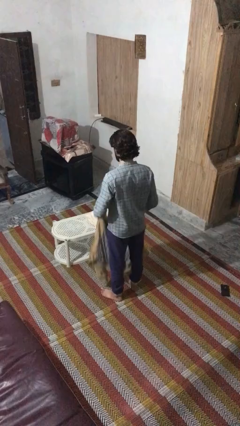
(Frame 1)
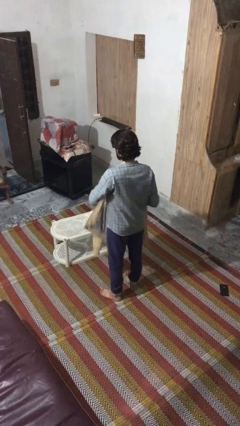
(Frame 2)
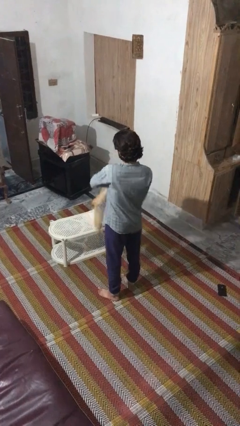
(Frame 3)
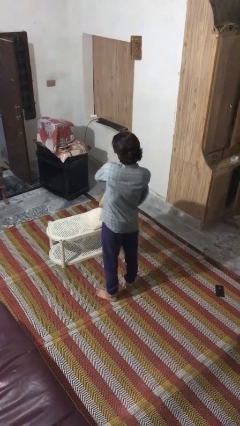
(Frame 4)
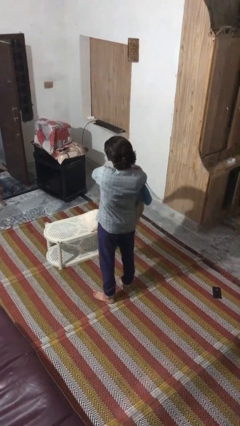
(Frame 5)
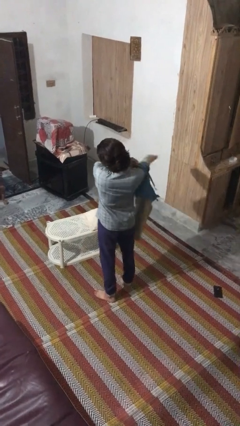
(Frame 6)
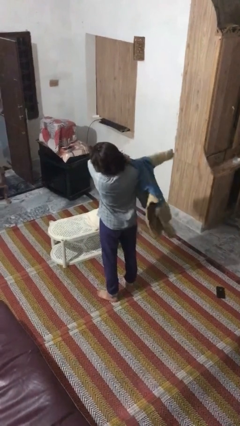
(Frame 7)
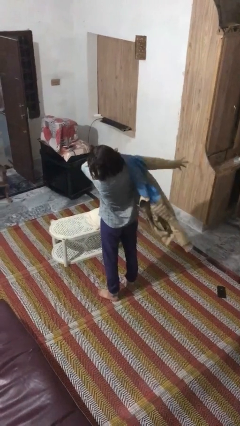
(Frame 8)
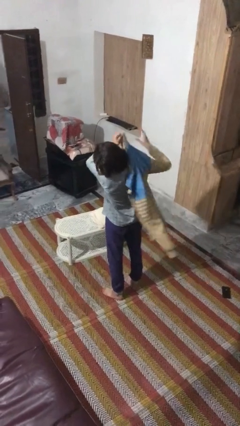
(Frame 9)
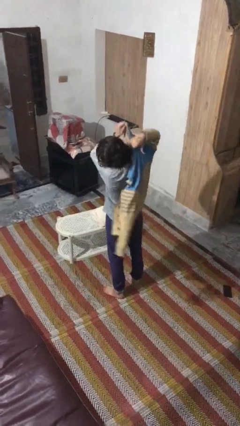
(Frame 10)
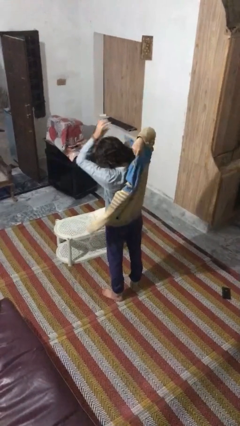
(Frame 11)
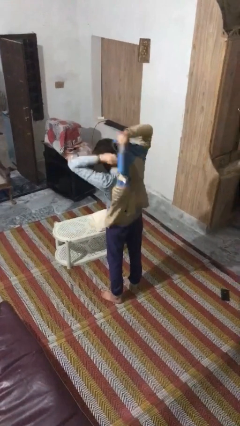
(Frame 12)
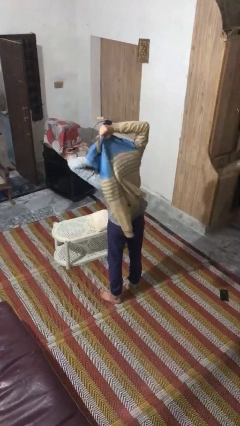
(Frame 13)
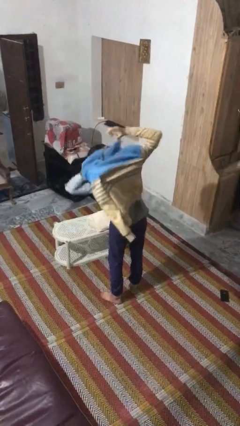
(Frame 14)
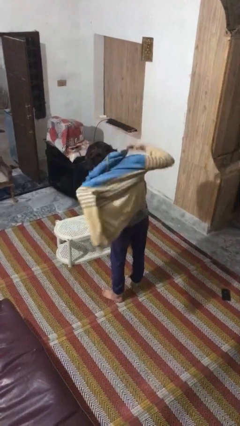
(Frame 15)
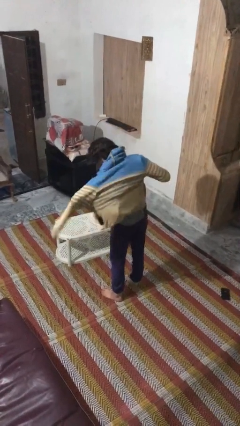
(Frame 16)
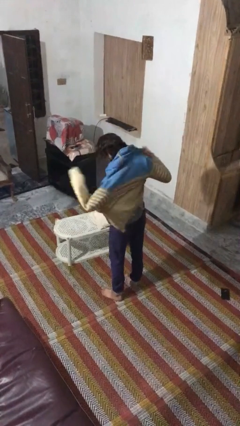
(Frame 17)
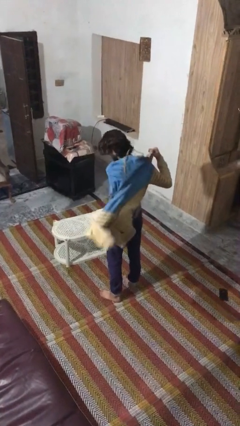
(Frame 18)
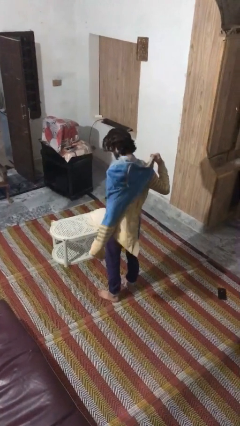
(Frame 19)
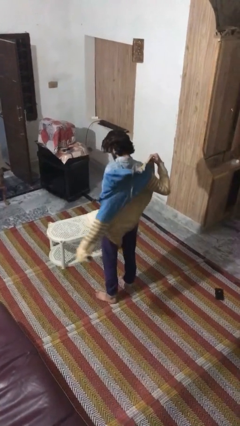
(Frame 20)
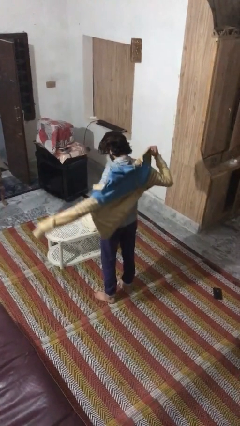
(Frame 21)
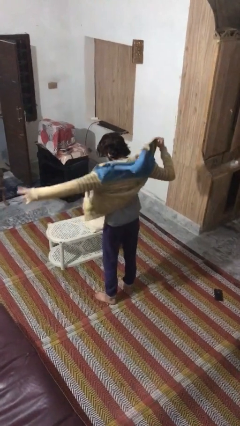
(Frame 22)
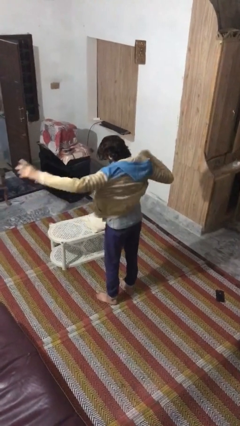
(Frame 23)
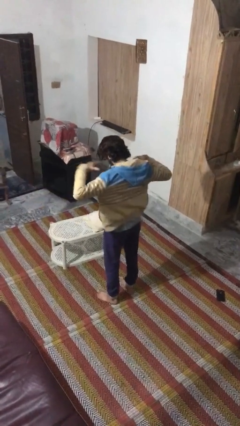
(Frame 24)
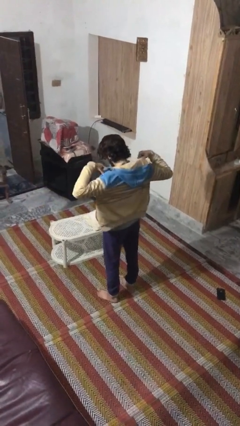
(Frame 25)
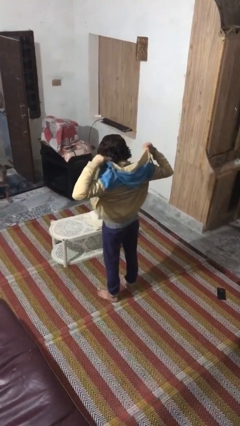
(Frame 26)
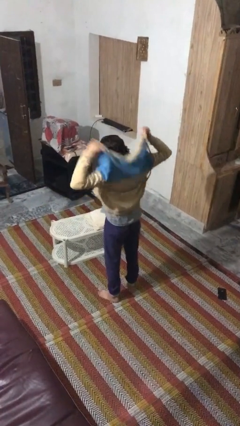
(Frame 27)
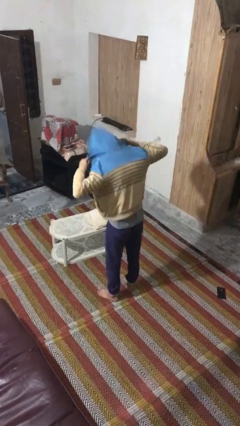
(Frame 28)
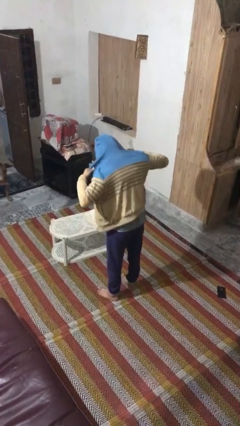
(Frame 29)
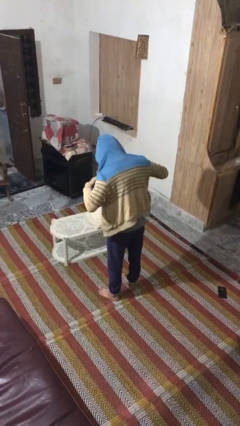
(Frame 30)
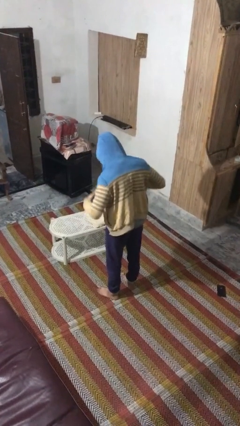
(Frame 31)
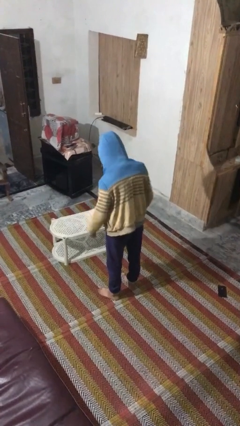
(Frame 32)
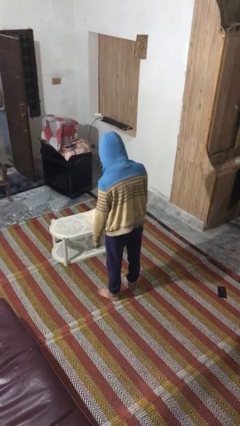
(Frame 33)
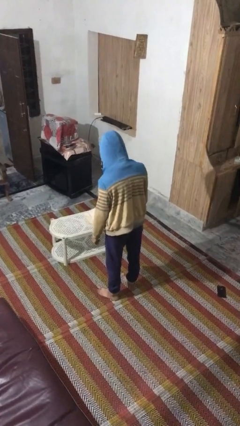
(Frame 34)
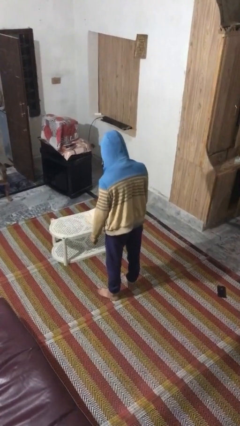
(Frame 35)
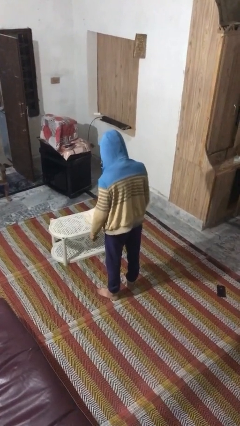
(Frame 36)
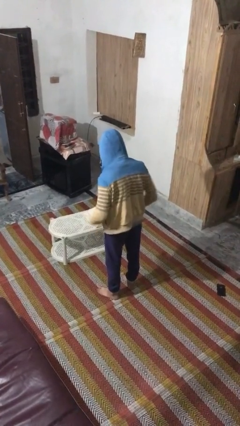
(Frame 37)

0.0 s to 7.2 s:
person puts on hoodie

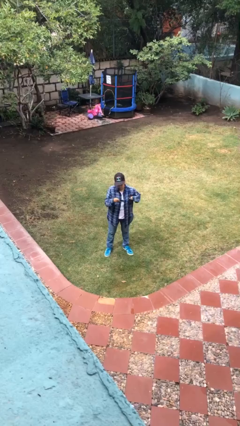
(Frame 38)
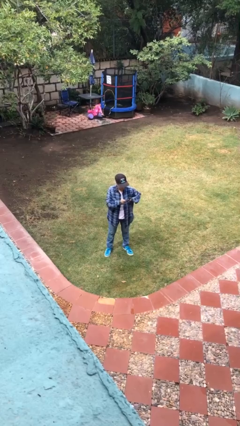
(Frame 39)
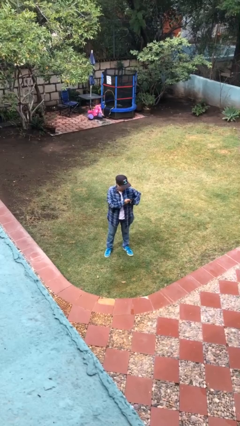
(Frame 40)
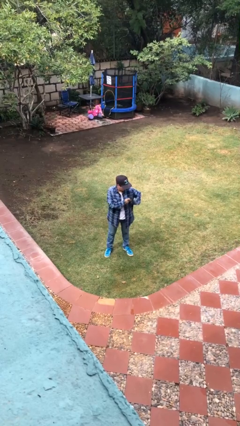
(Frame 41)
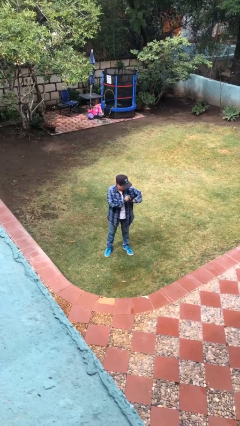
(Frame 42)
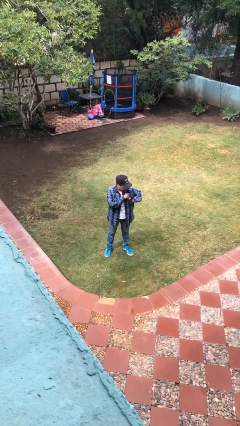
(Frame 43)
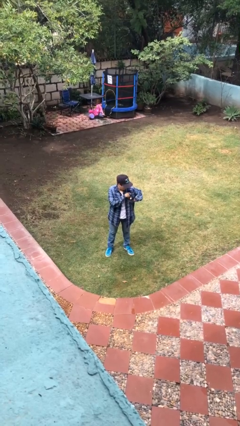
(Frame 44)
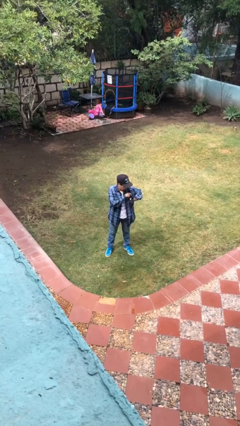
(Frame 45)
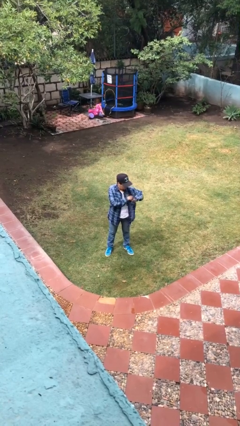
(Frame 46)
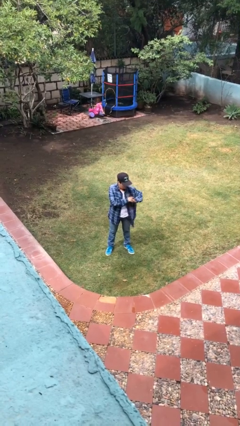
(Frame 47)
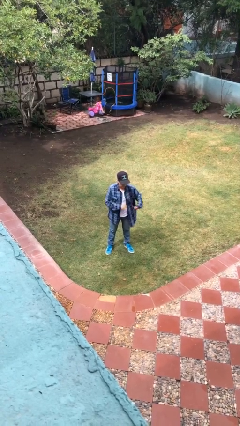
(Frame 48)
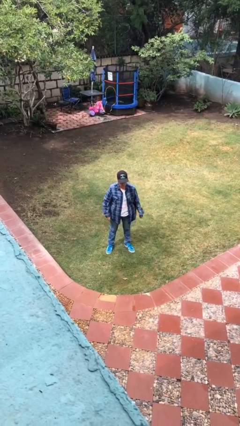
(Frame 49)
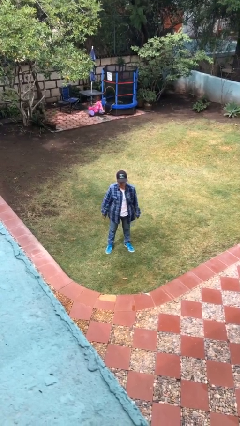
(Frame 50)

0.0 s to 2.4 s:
person puts phone into pocket

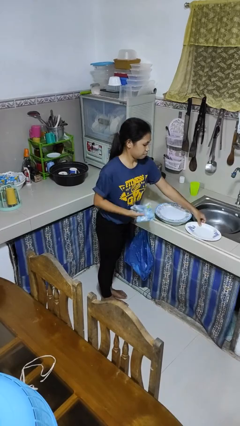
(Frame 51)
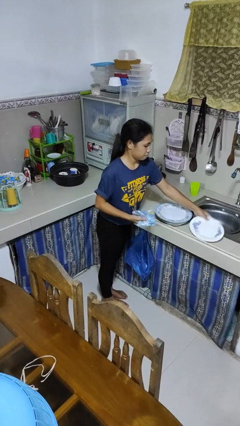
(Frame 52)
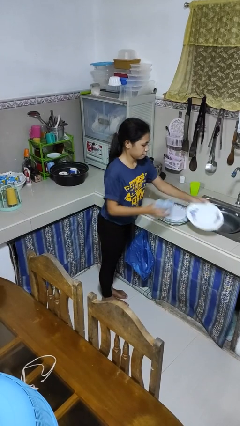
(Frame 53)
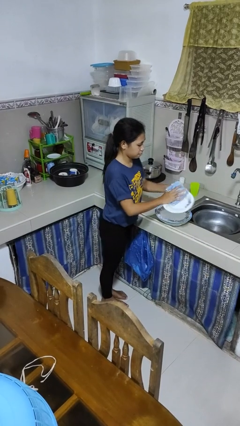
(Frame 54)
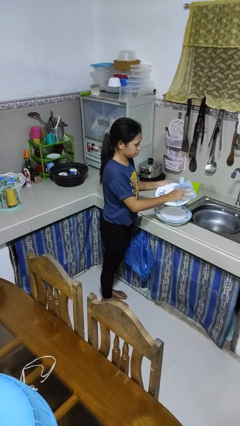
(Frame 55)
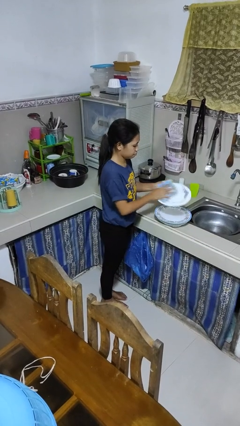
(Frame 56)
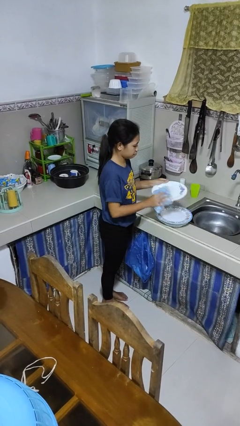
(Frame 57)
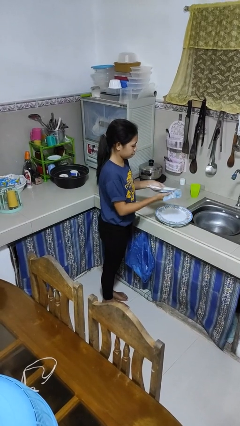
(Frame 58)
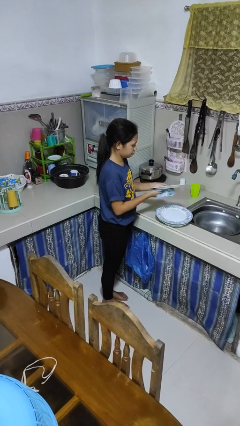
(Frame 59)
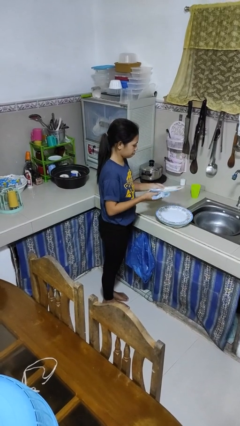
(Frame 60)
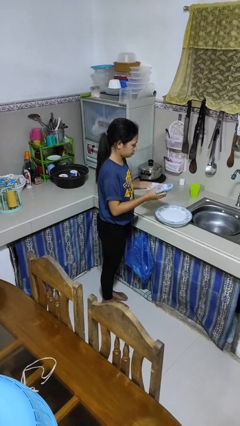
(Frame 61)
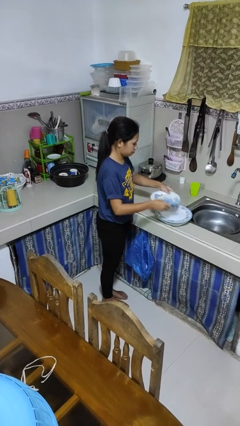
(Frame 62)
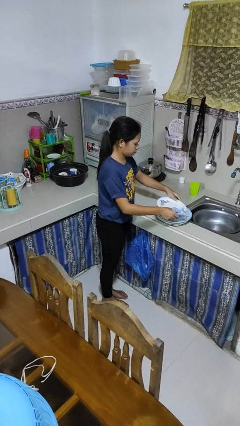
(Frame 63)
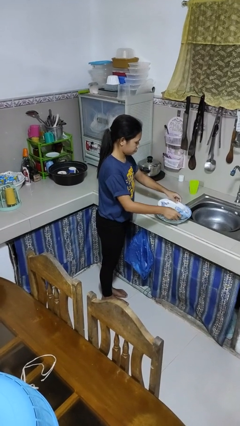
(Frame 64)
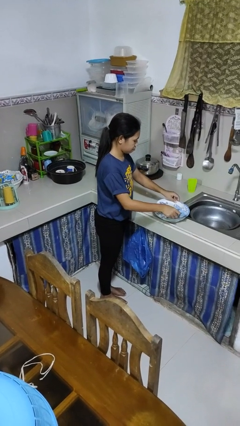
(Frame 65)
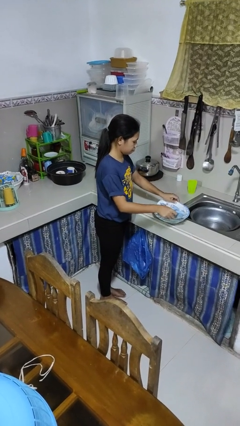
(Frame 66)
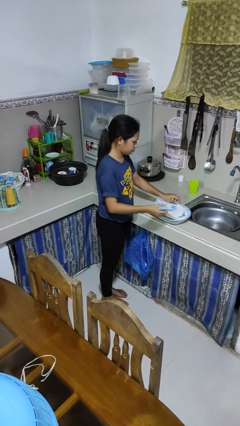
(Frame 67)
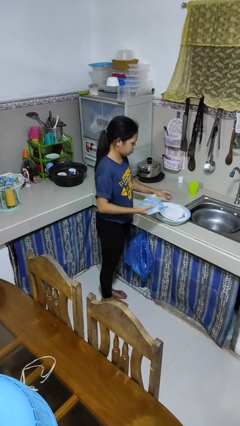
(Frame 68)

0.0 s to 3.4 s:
person dries dish

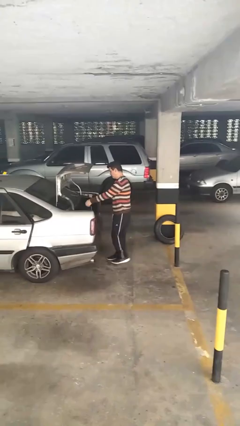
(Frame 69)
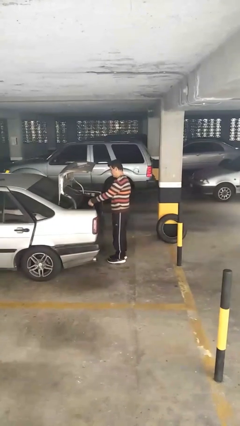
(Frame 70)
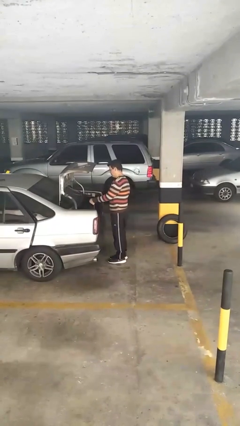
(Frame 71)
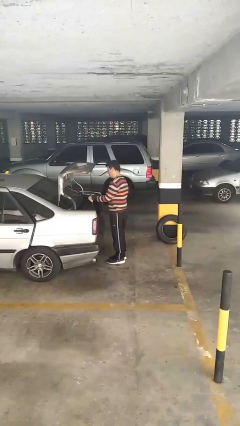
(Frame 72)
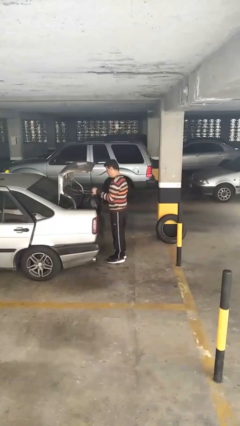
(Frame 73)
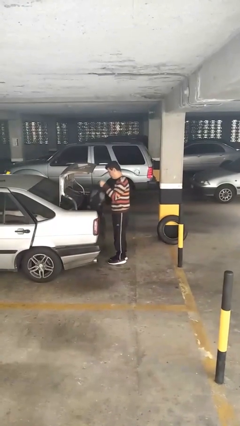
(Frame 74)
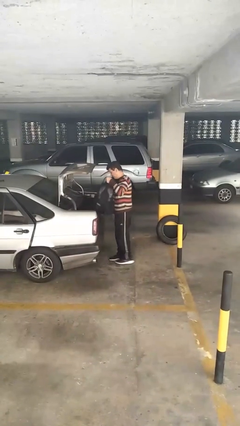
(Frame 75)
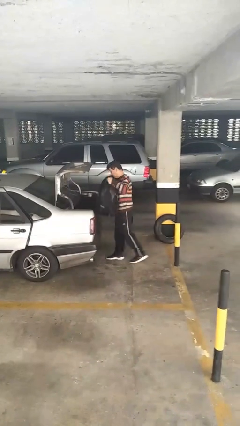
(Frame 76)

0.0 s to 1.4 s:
person unloads car

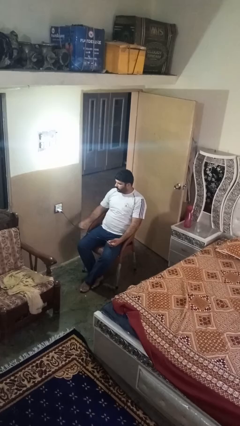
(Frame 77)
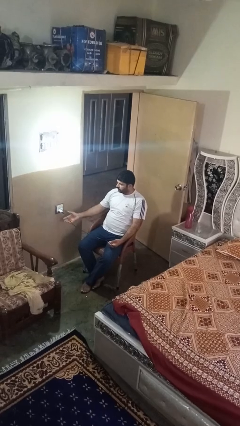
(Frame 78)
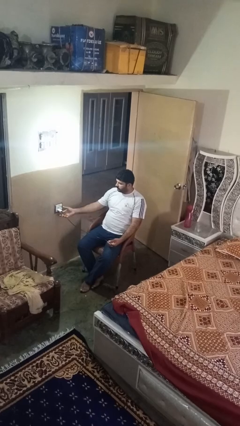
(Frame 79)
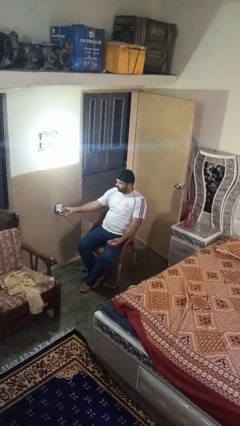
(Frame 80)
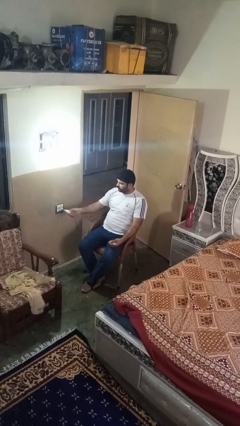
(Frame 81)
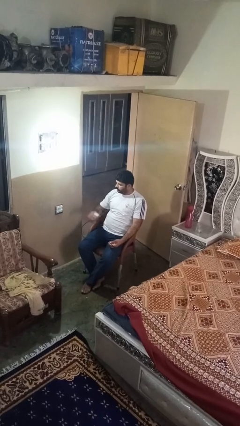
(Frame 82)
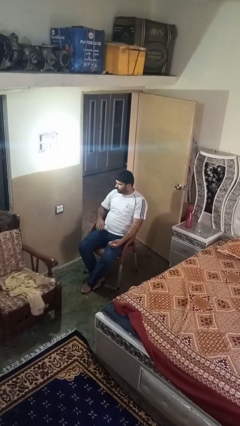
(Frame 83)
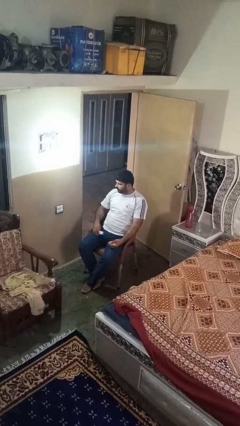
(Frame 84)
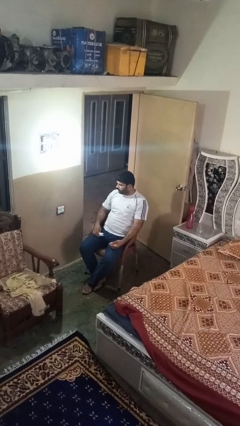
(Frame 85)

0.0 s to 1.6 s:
person unplugs from electrical socket

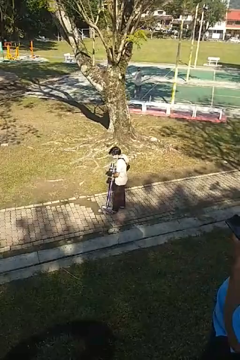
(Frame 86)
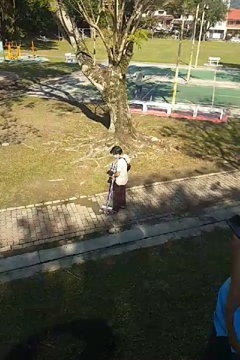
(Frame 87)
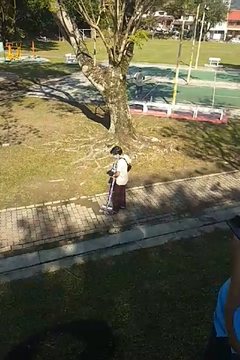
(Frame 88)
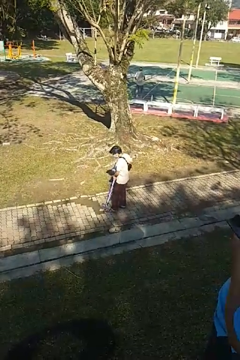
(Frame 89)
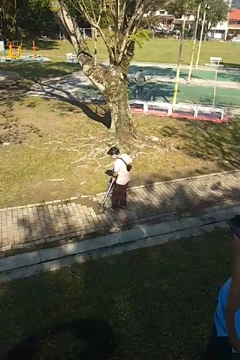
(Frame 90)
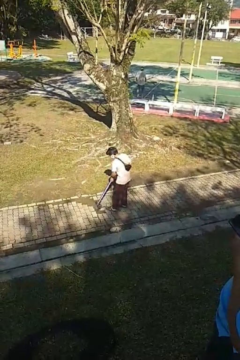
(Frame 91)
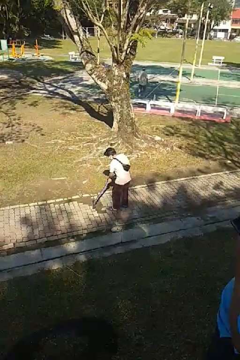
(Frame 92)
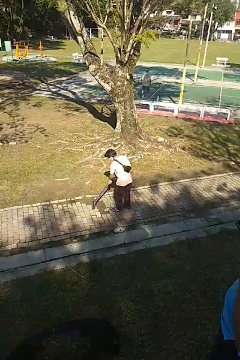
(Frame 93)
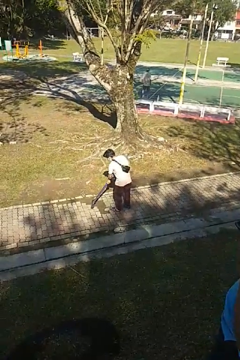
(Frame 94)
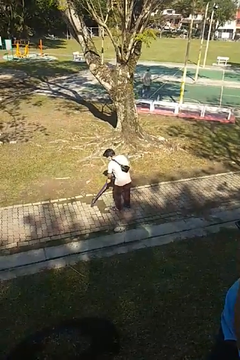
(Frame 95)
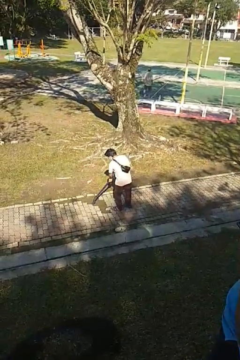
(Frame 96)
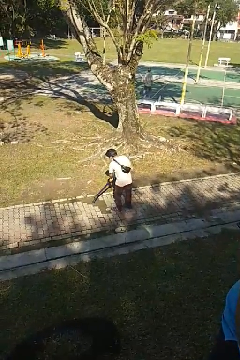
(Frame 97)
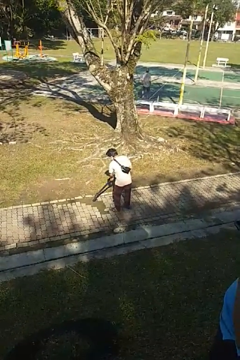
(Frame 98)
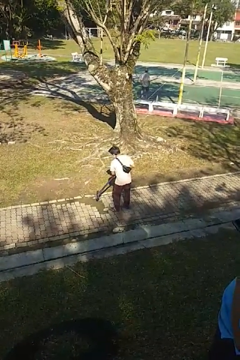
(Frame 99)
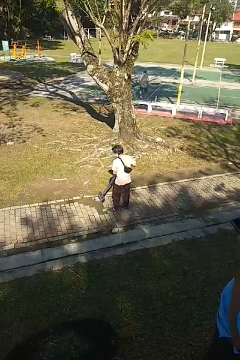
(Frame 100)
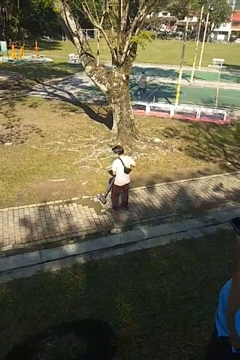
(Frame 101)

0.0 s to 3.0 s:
person vacuums carpet